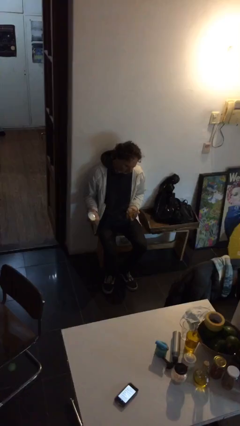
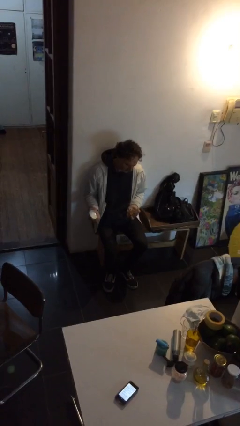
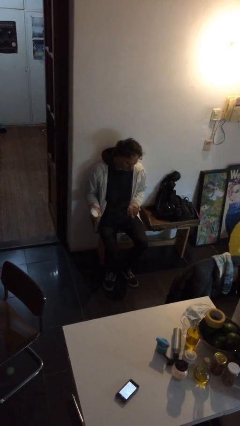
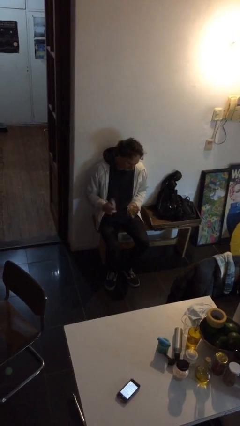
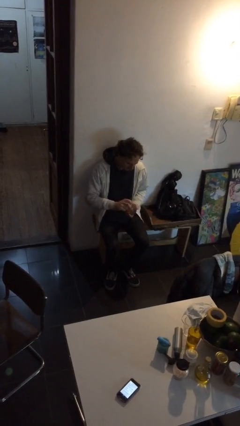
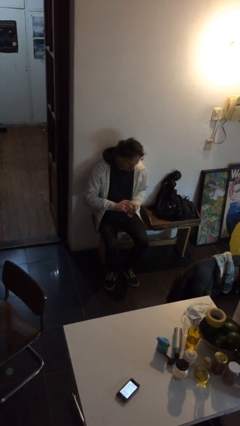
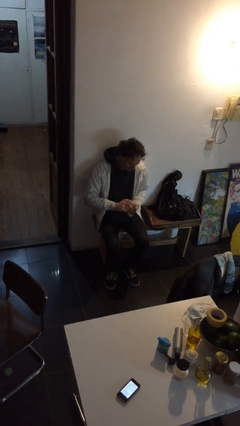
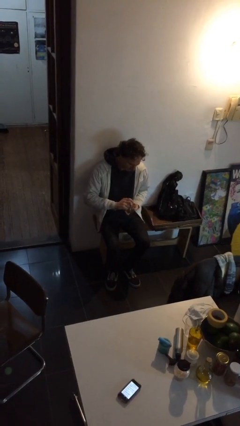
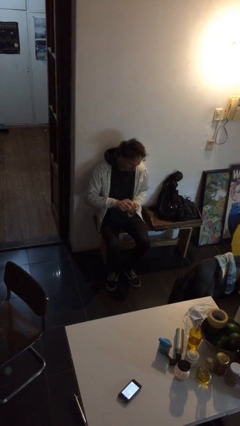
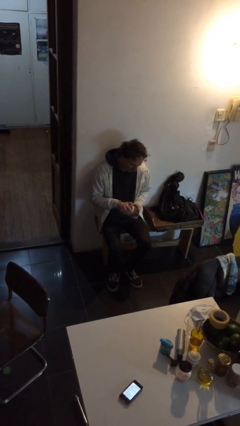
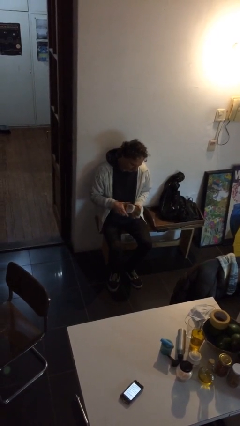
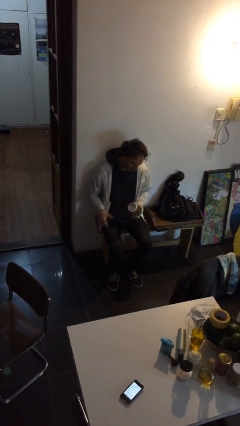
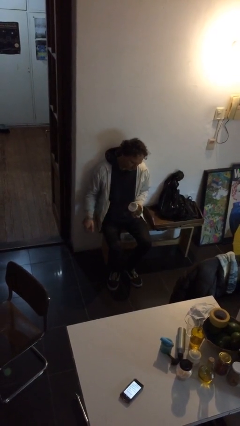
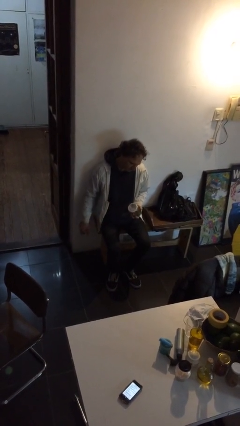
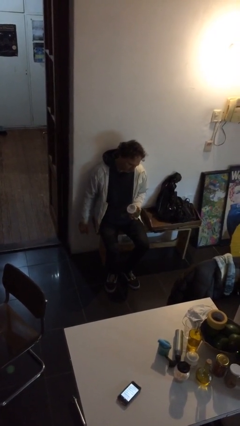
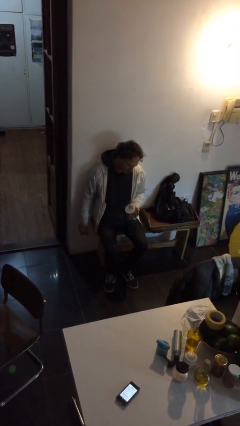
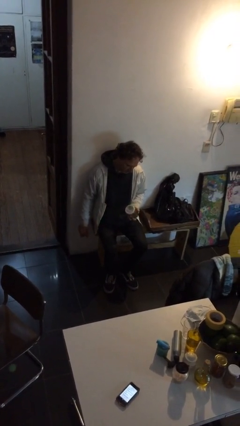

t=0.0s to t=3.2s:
person closes jar

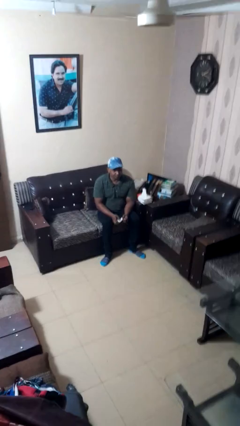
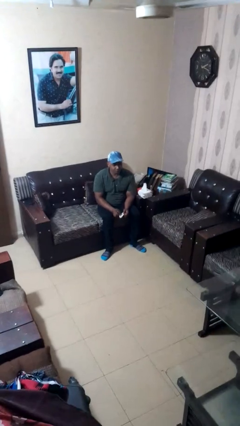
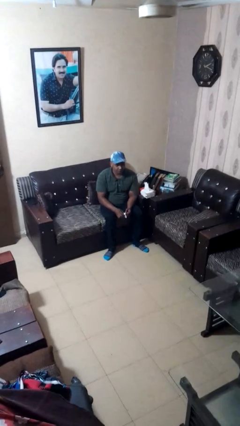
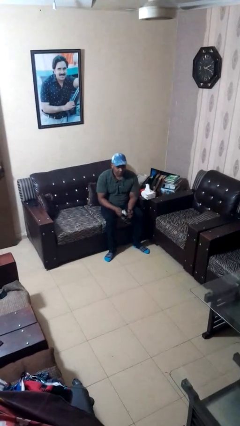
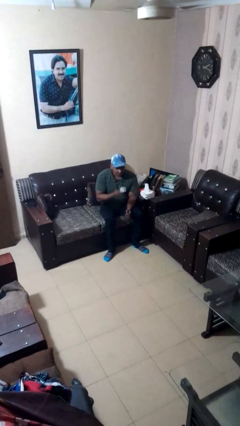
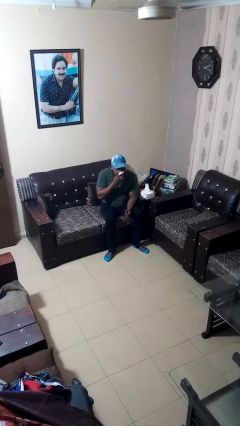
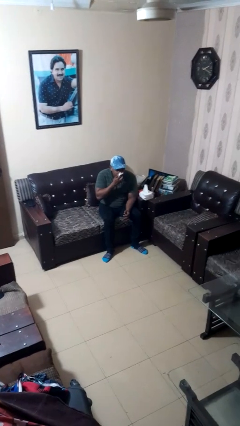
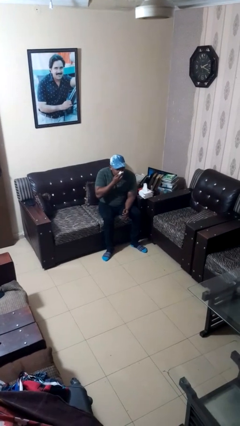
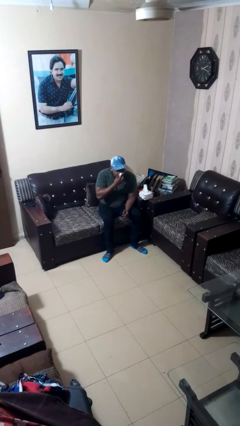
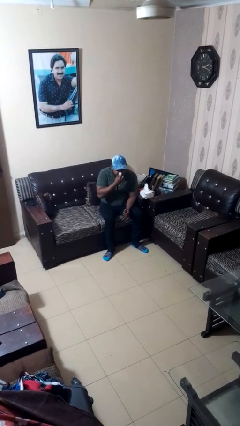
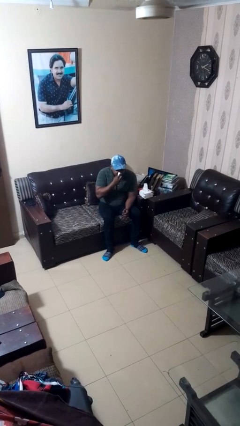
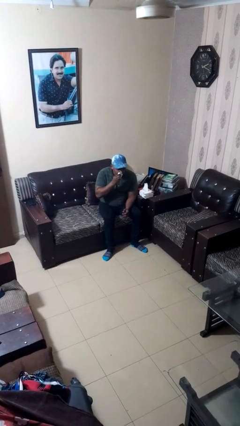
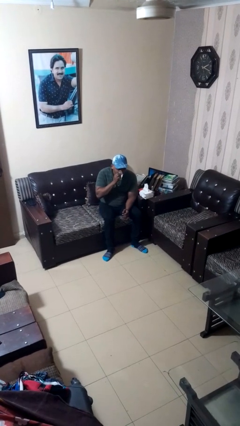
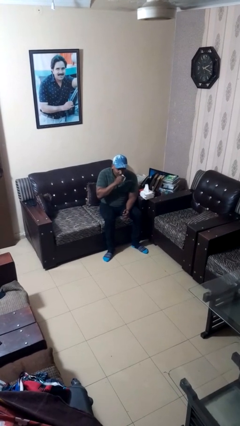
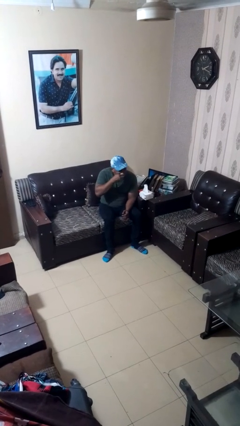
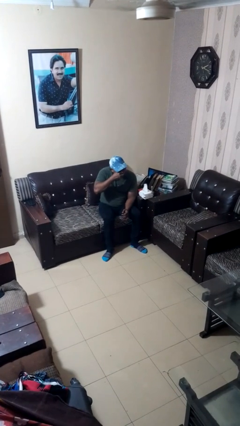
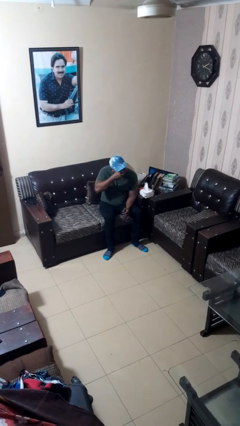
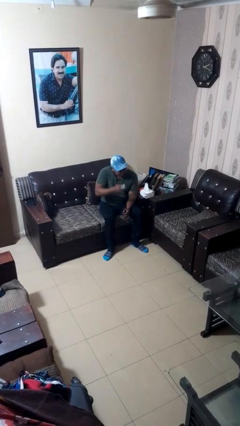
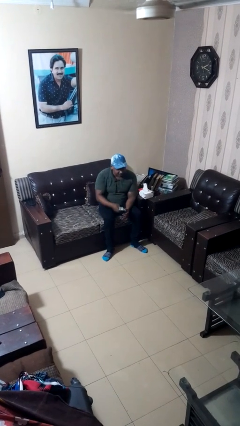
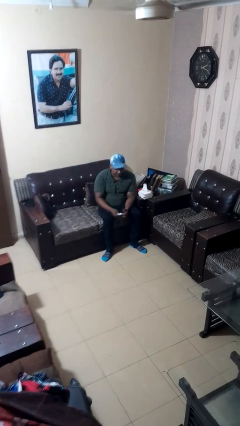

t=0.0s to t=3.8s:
person blows nose

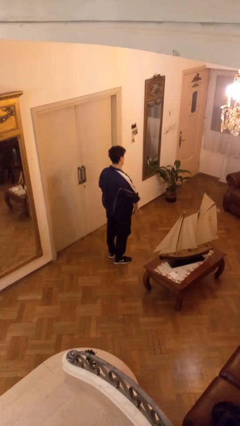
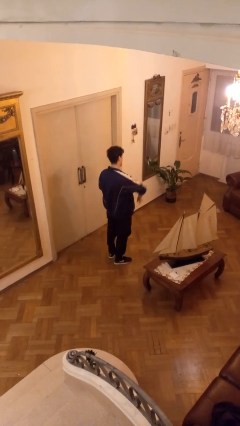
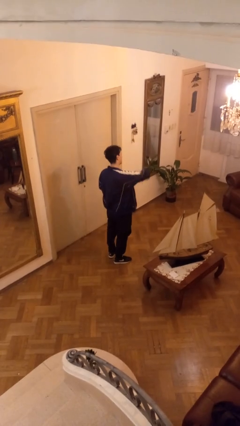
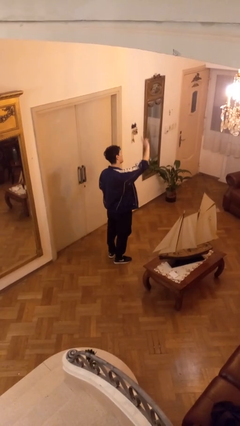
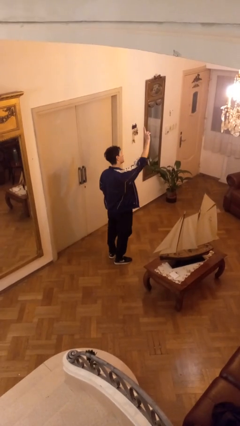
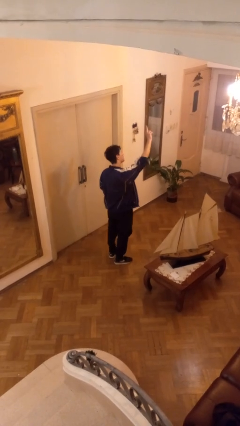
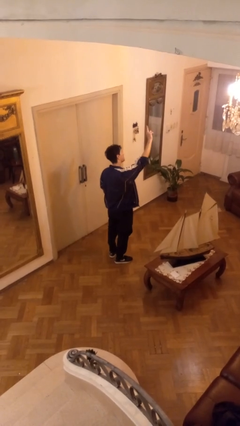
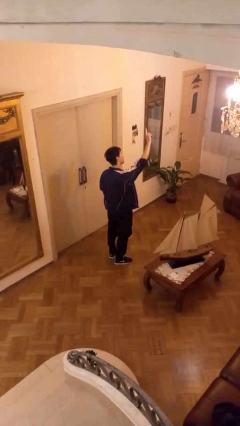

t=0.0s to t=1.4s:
person gestures swipe up

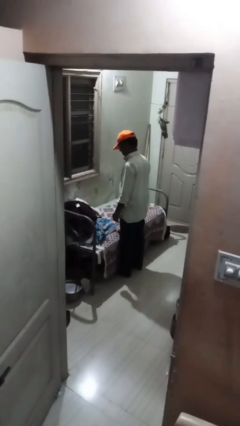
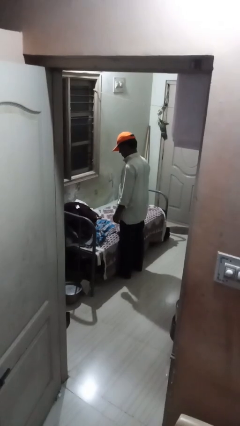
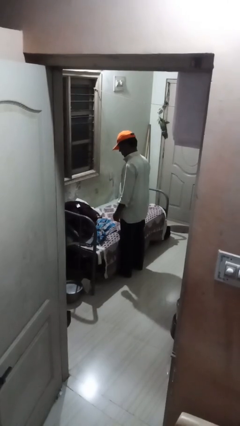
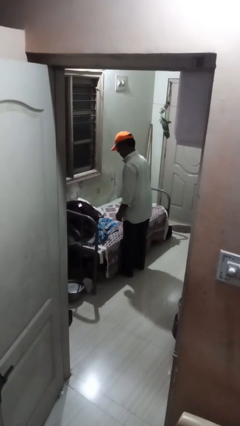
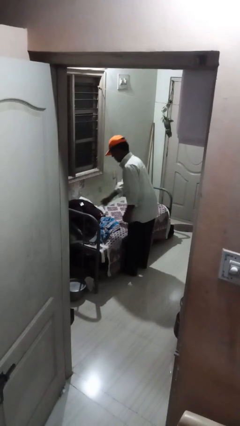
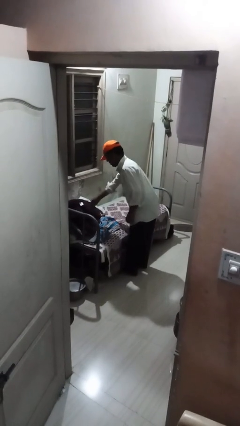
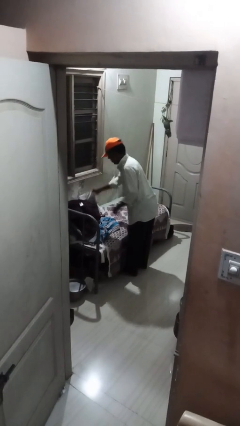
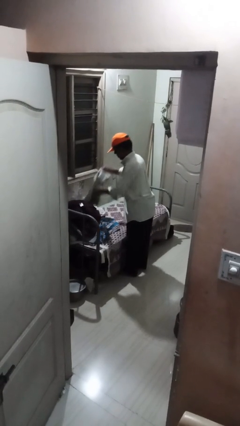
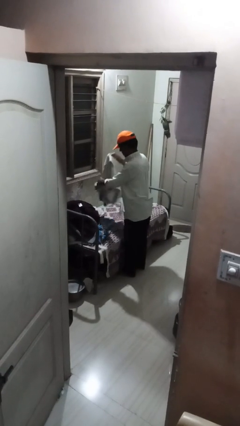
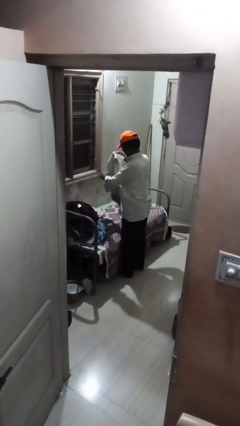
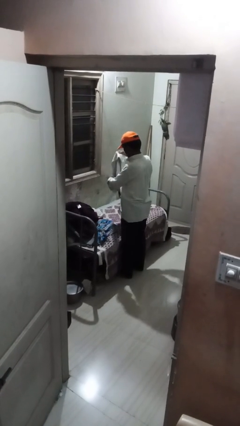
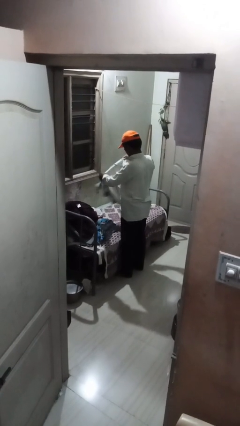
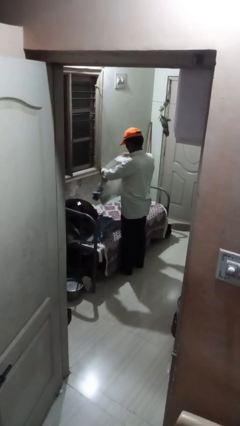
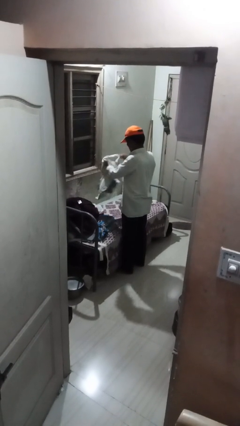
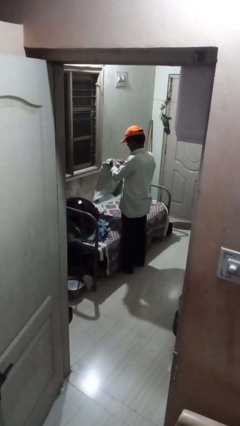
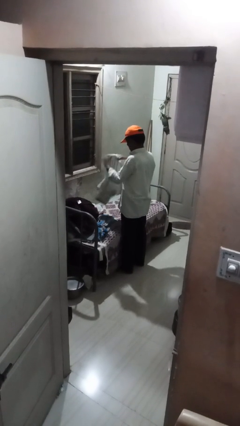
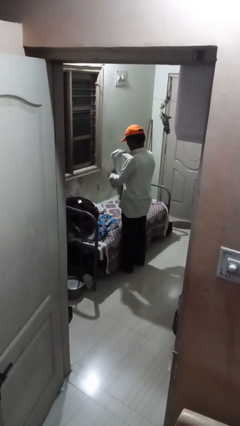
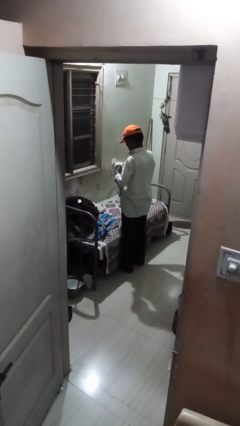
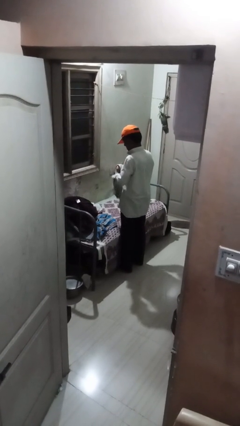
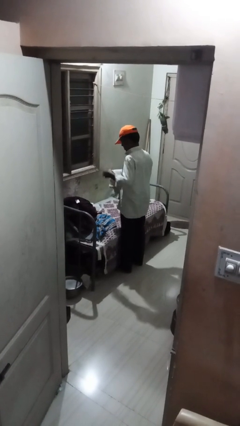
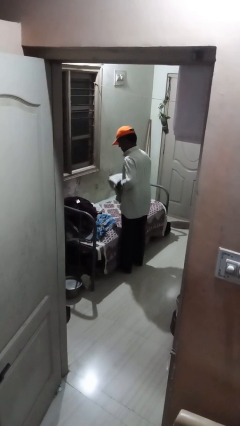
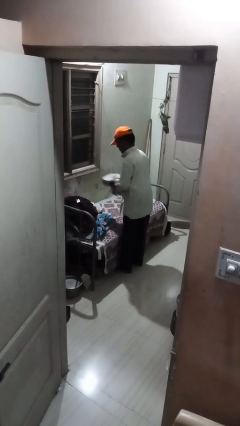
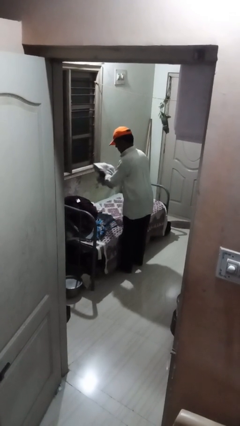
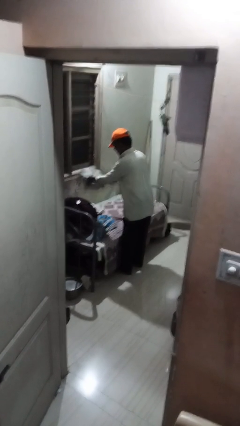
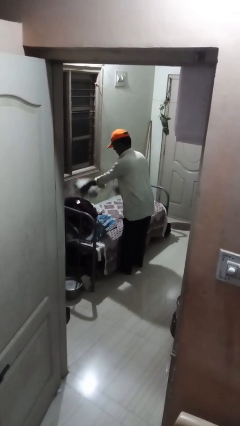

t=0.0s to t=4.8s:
person folds shirt

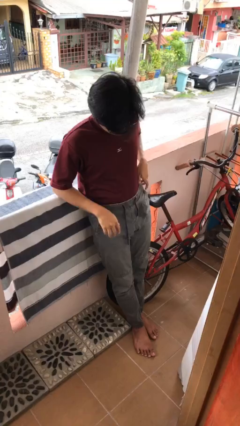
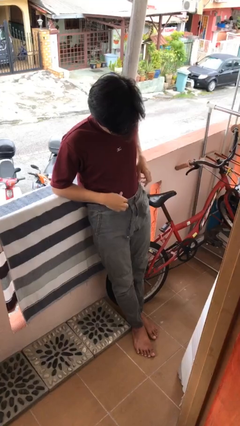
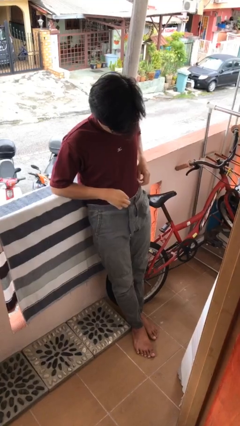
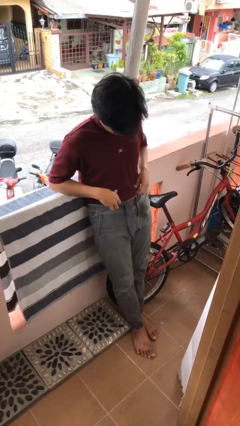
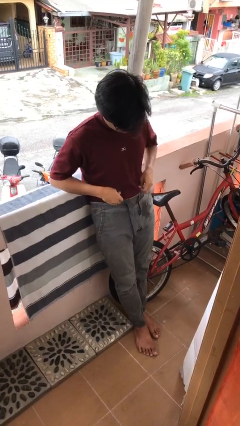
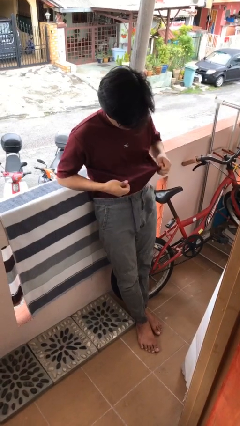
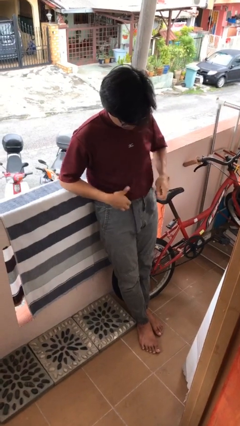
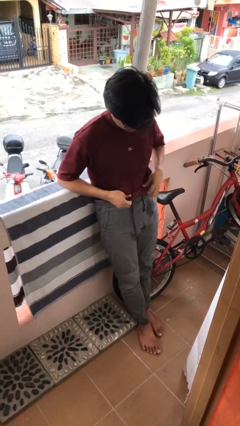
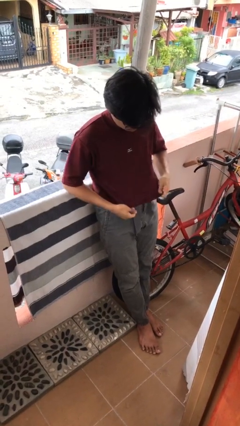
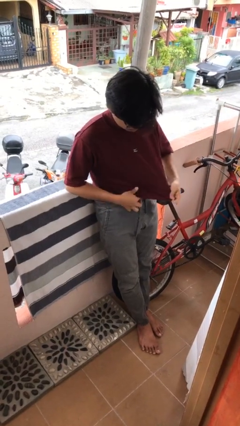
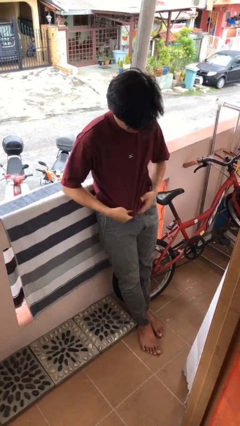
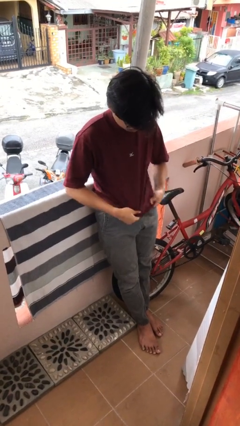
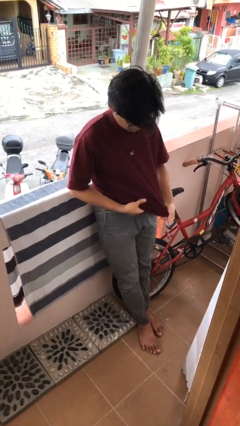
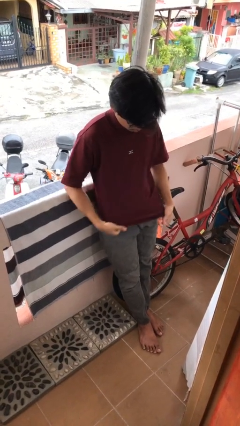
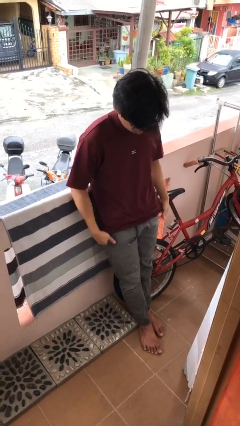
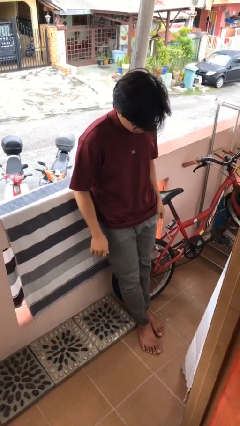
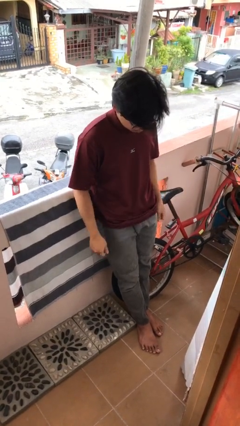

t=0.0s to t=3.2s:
person untucks shirt

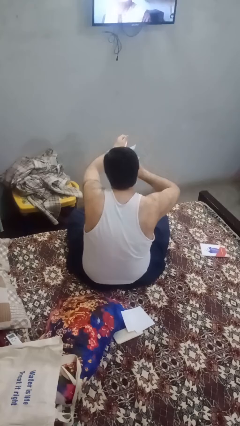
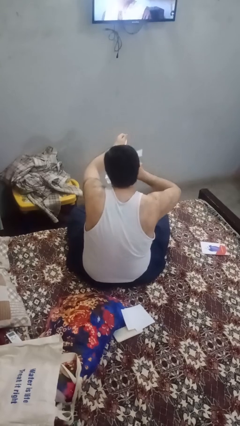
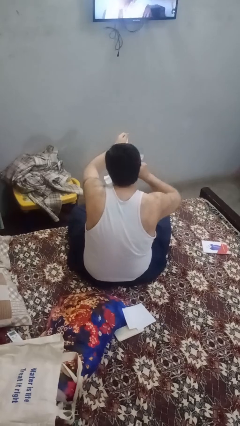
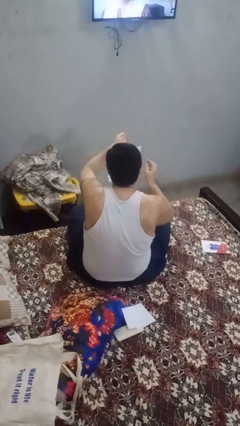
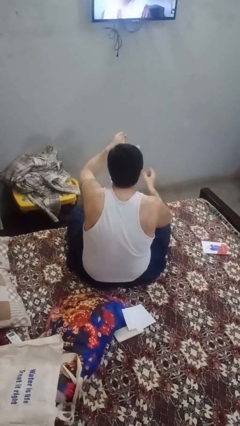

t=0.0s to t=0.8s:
person tears paper

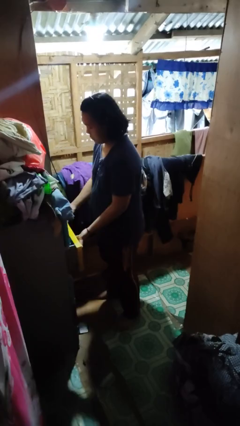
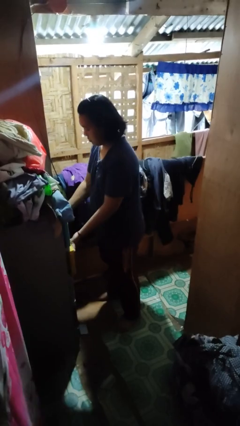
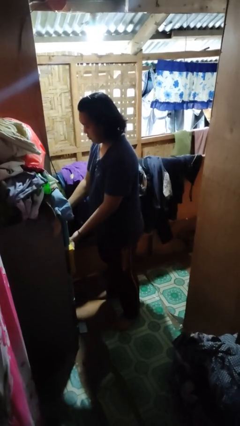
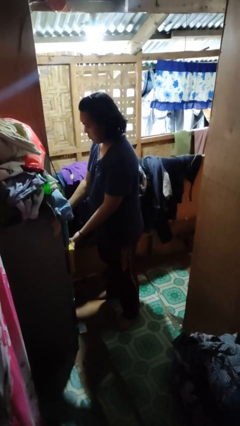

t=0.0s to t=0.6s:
person closes dresser drawer
